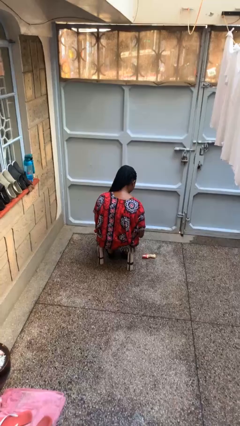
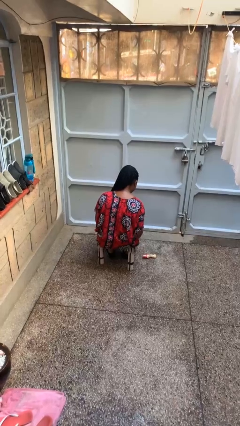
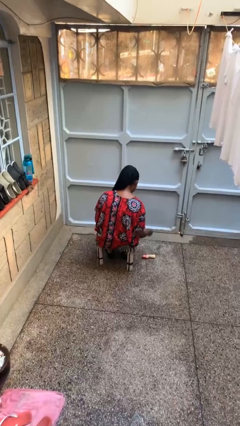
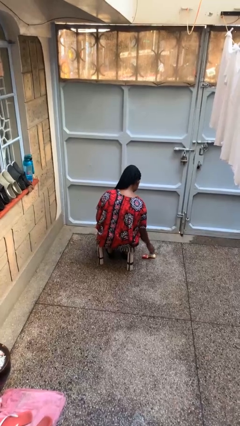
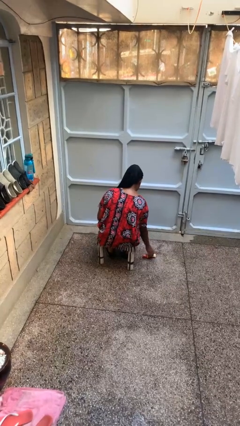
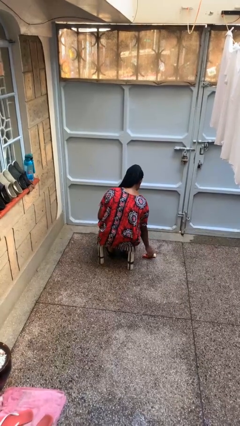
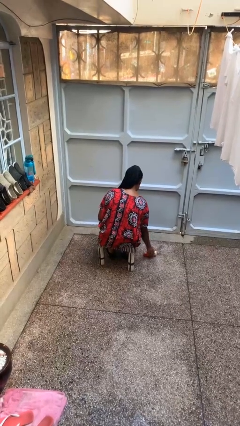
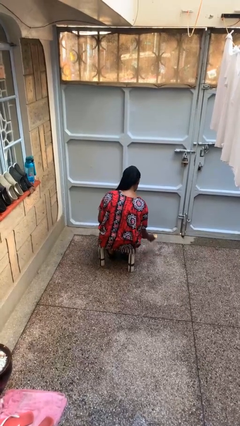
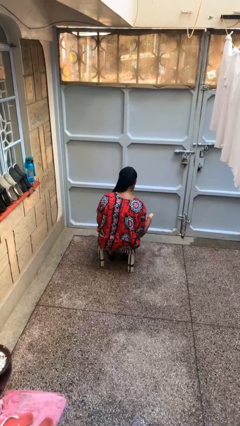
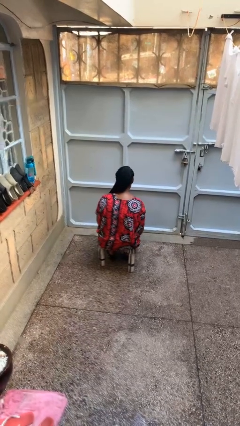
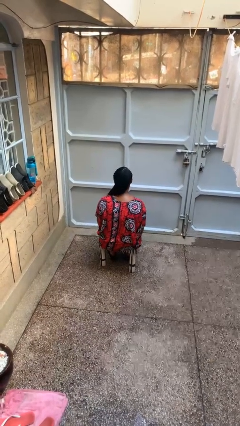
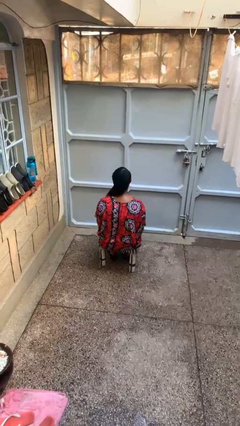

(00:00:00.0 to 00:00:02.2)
person picks up object from floor

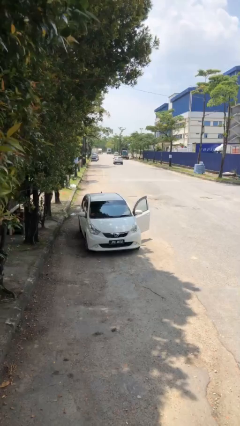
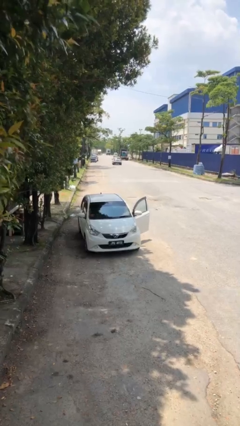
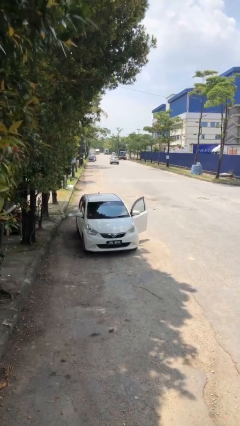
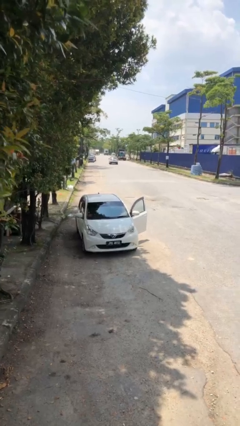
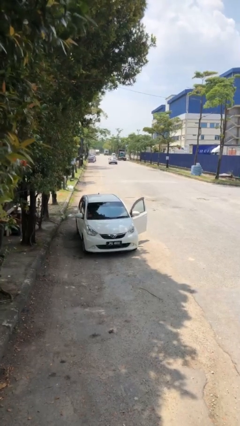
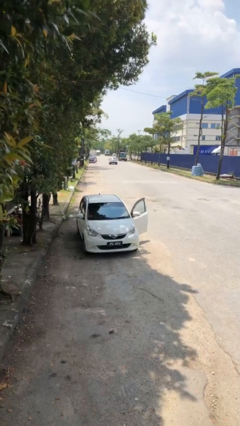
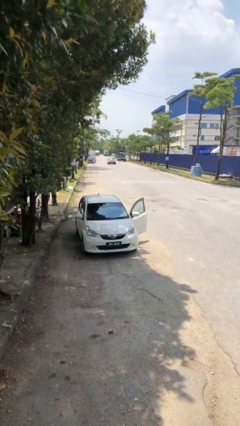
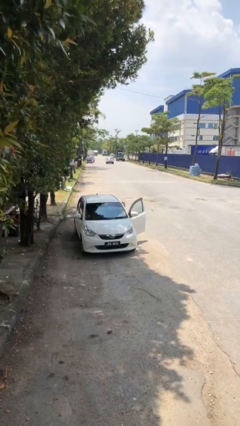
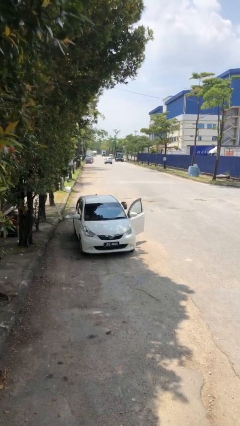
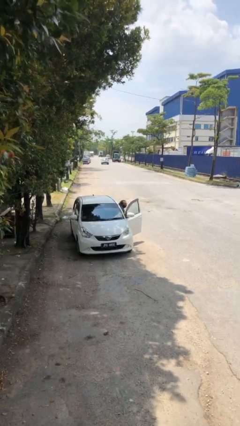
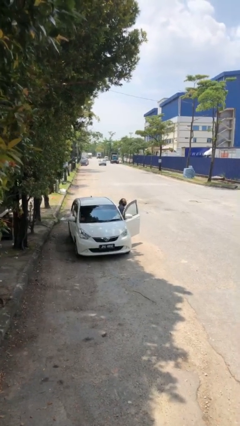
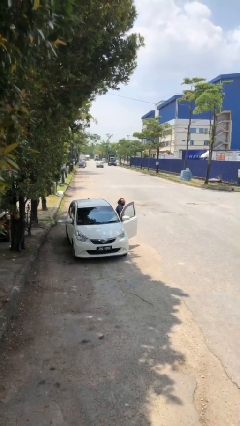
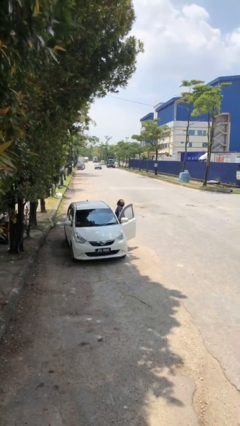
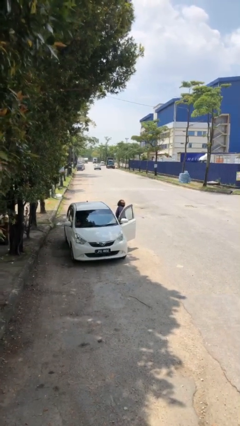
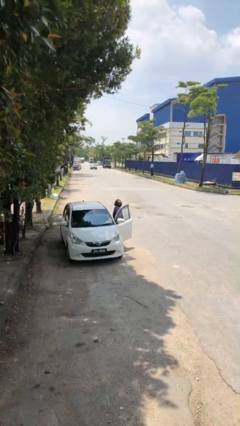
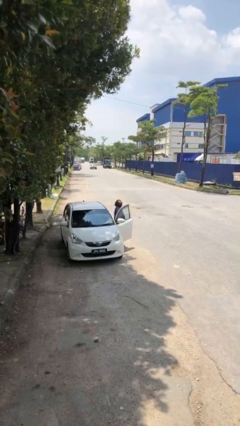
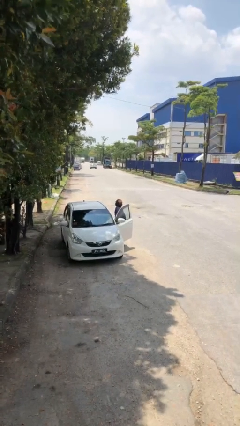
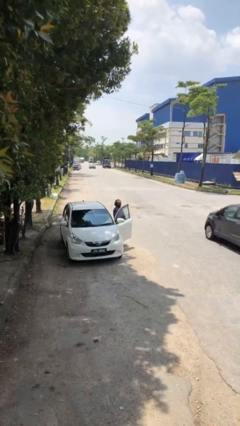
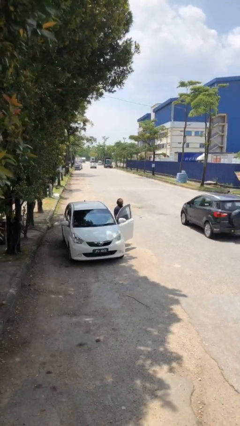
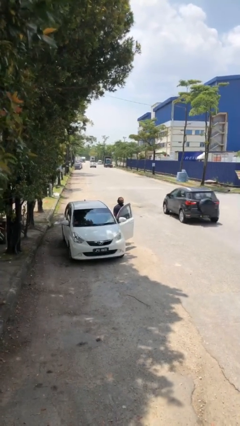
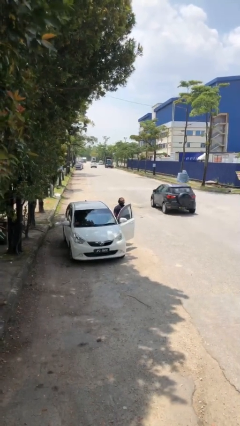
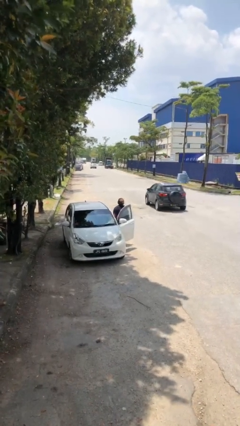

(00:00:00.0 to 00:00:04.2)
person exits car

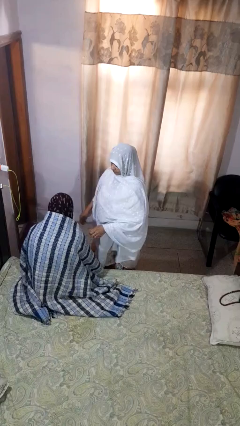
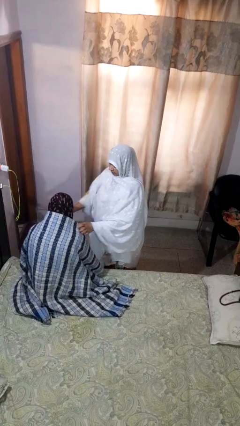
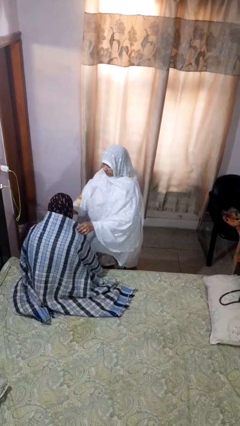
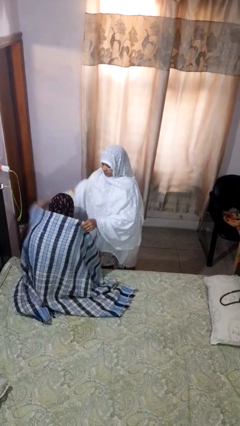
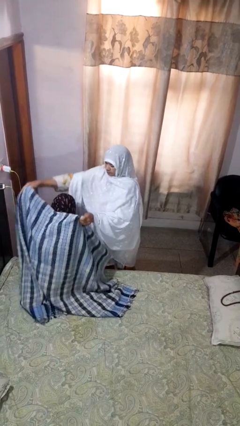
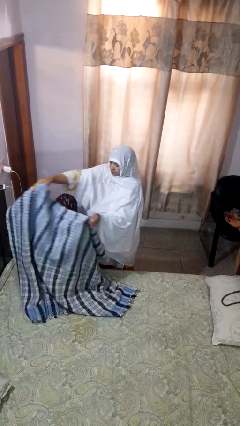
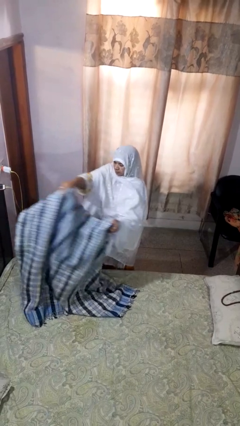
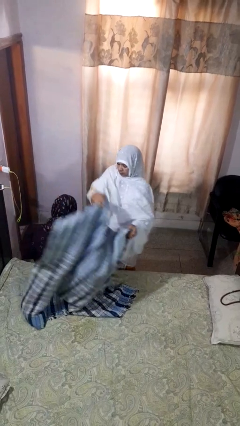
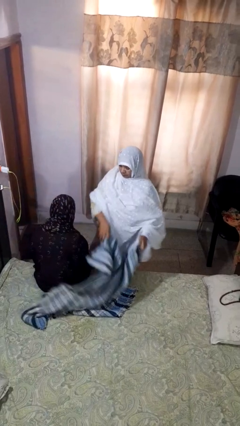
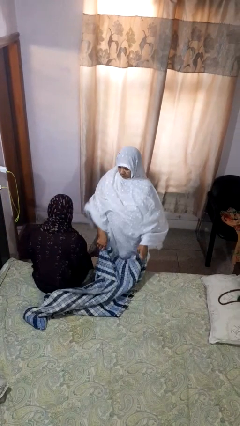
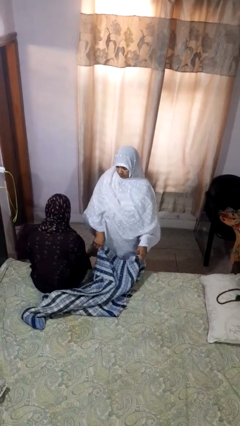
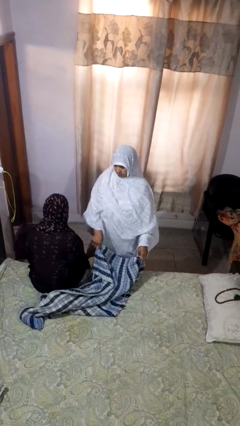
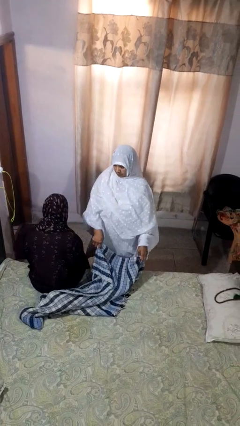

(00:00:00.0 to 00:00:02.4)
person uncovers friend with blanket

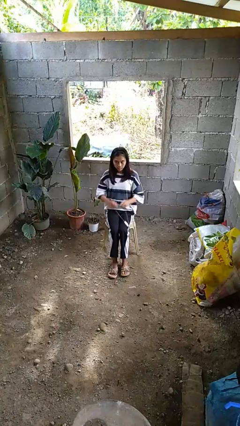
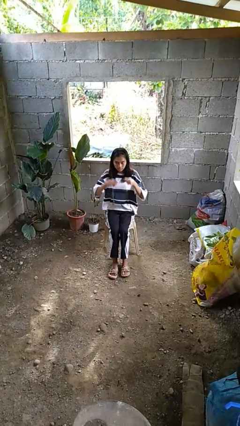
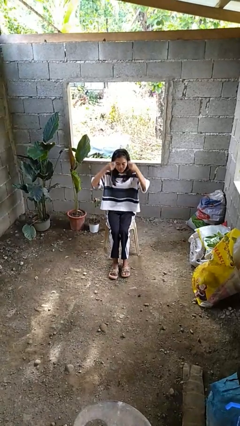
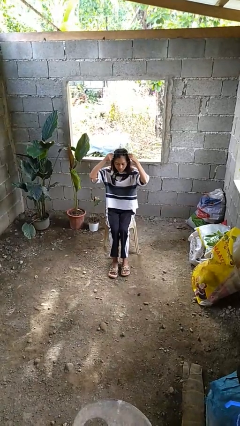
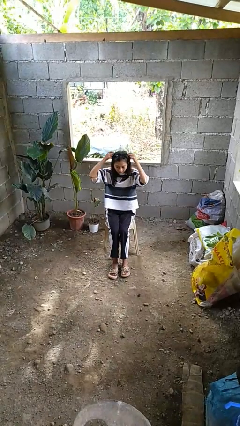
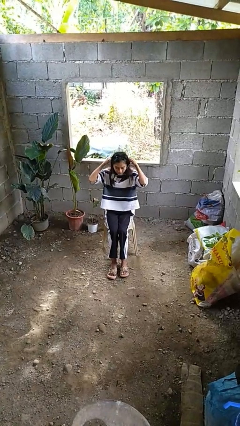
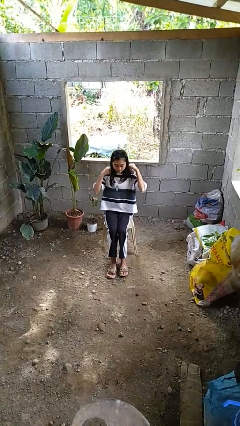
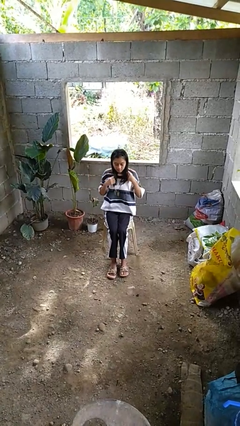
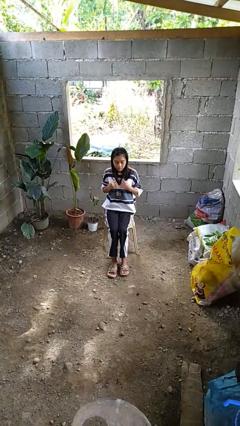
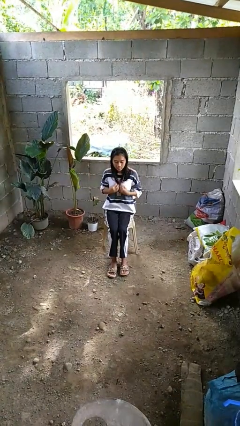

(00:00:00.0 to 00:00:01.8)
person puts on necklace

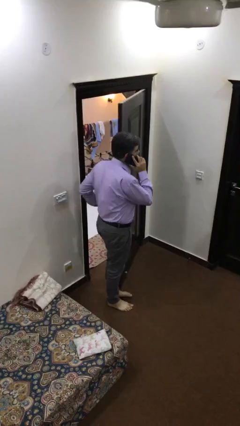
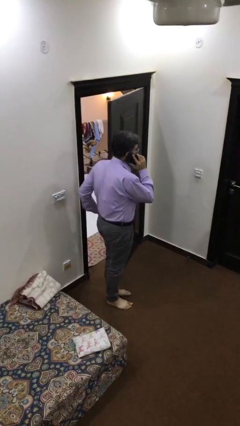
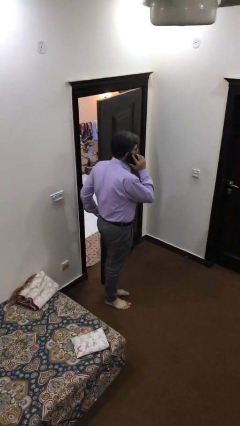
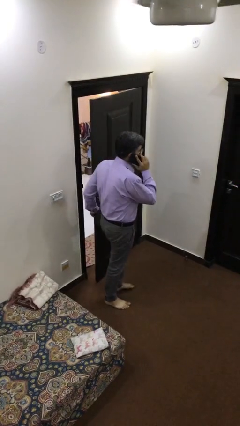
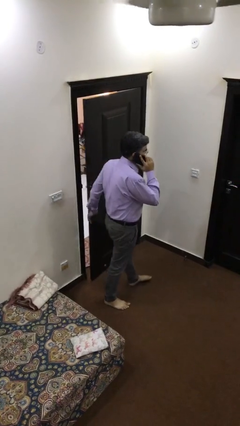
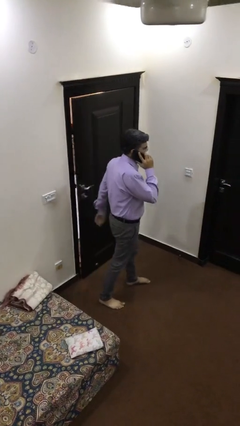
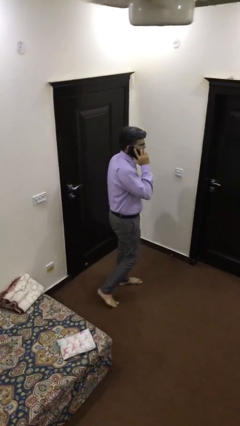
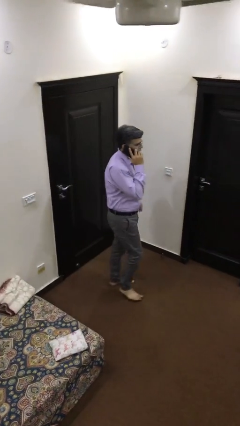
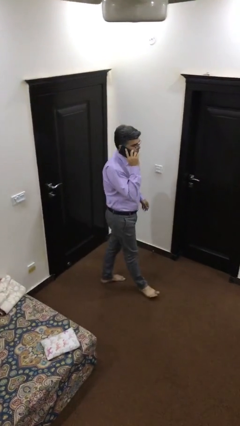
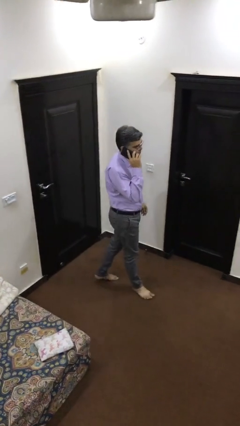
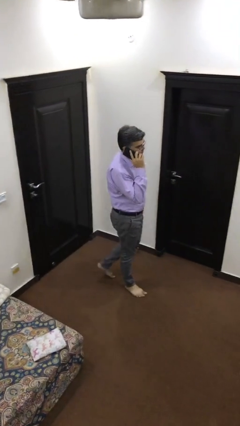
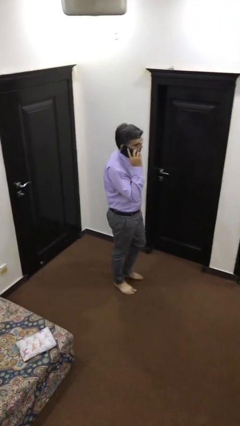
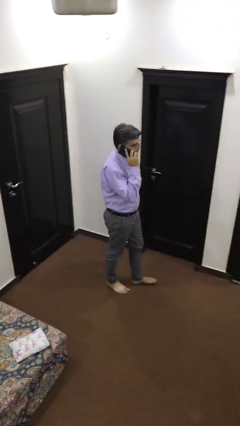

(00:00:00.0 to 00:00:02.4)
person closes facility door

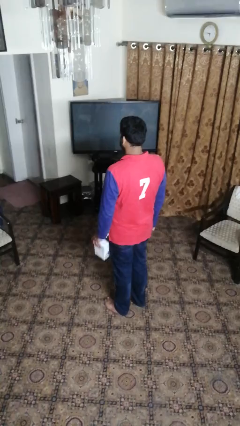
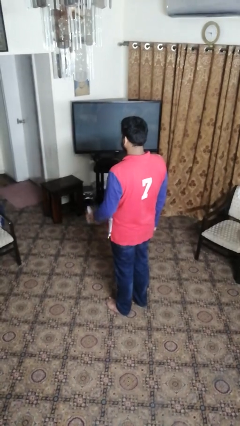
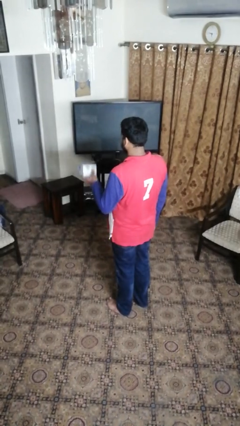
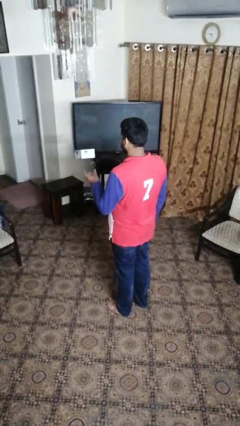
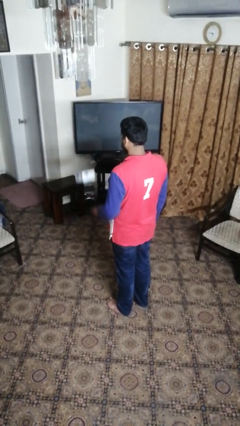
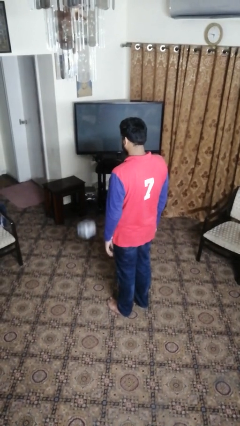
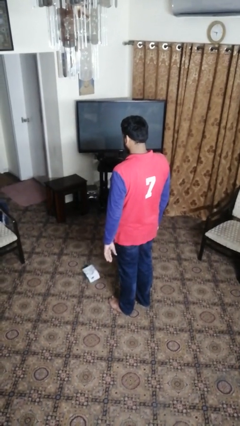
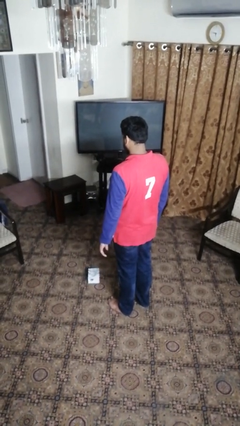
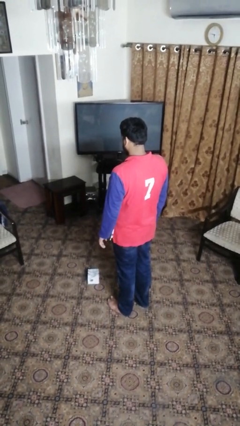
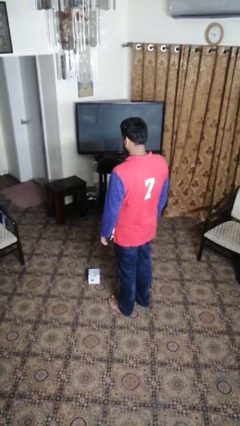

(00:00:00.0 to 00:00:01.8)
person throws object into air

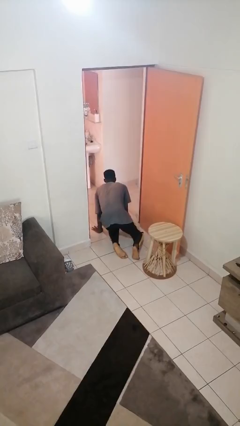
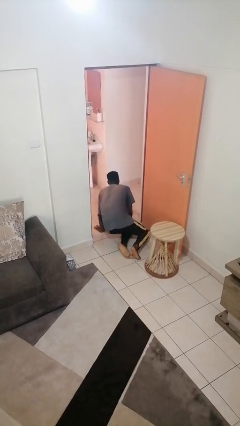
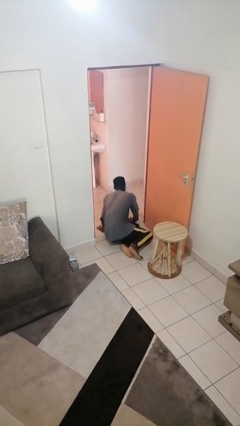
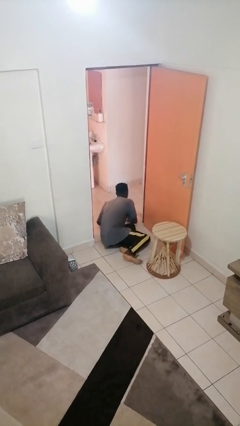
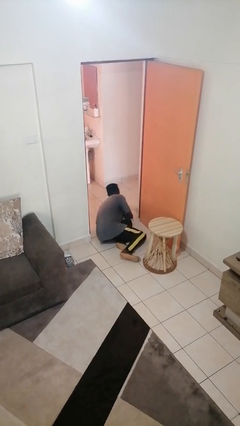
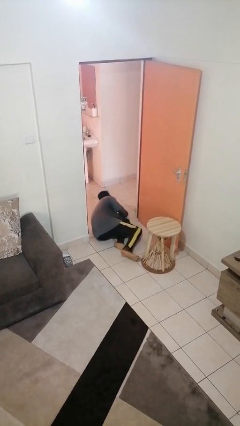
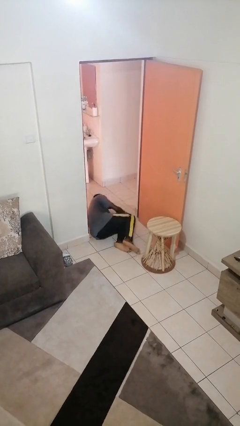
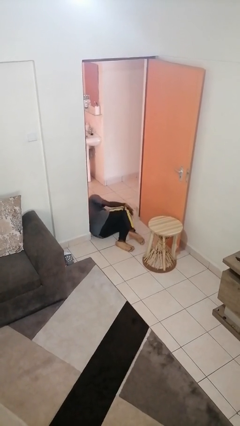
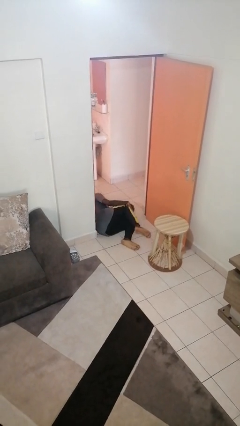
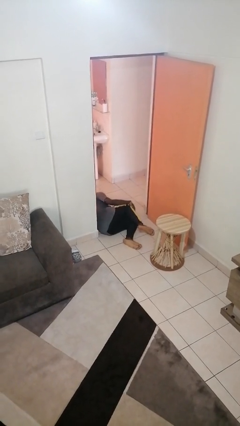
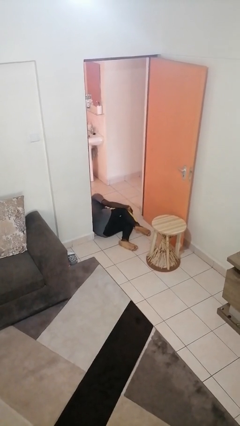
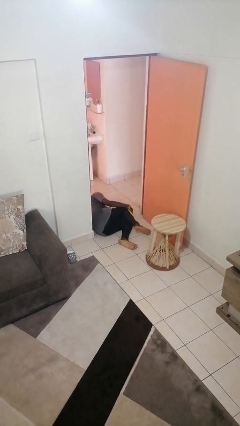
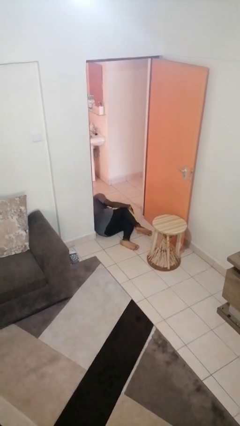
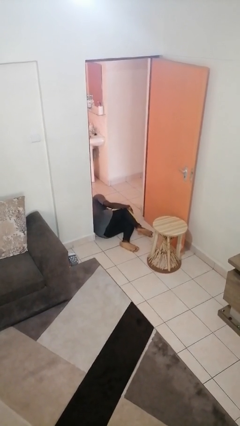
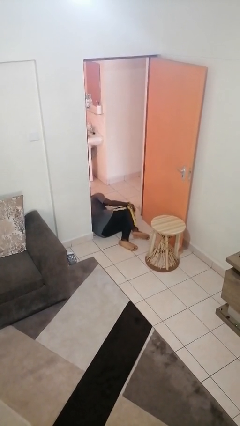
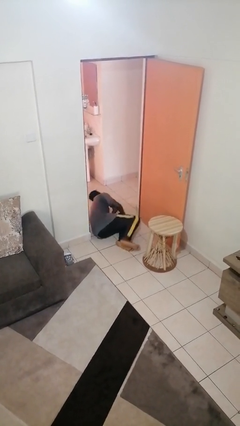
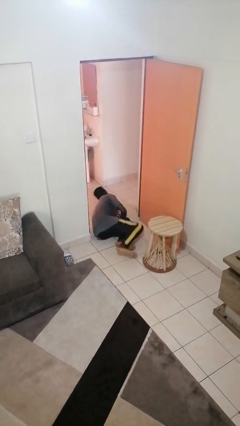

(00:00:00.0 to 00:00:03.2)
person lies down on floor
